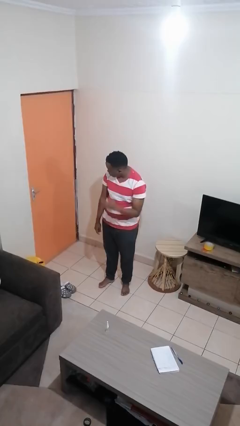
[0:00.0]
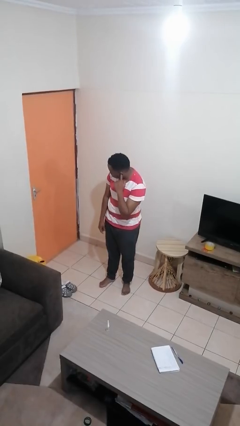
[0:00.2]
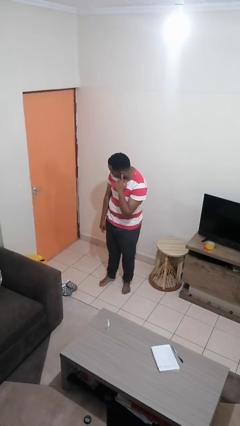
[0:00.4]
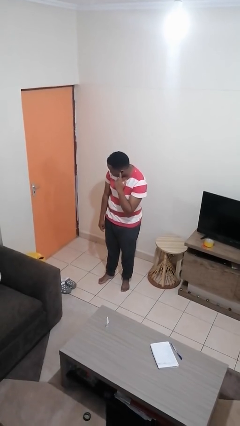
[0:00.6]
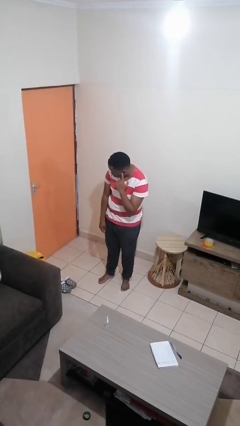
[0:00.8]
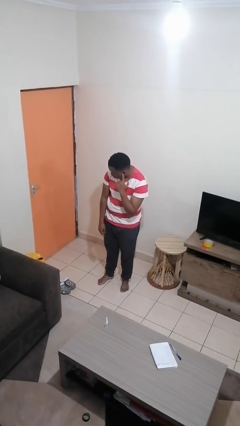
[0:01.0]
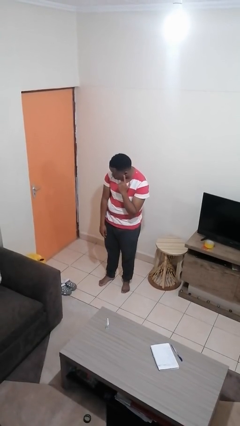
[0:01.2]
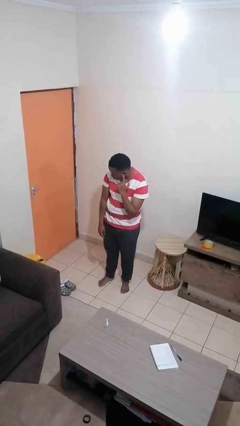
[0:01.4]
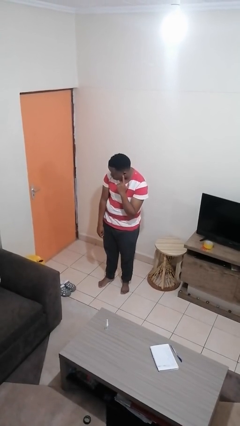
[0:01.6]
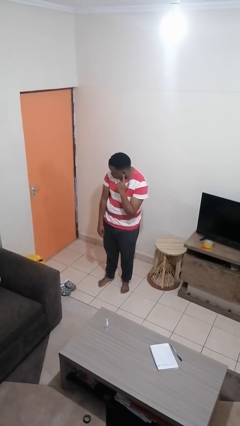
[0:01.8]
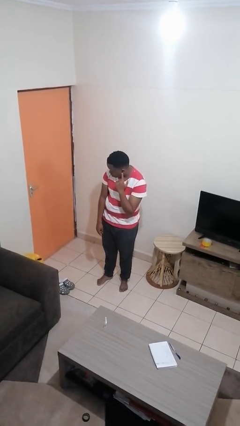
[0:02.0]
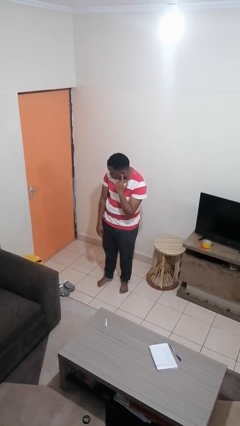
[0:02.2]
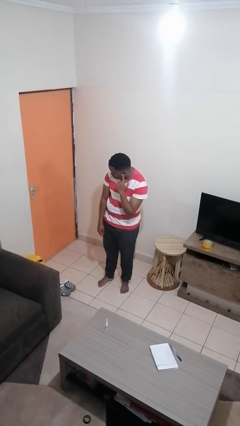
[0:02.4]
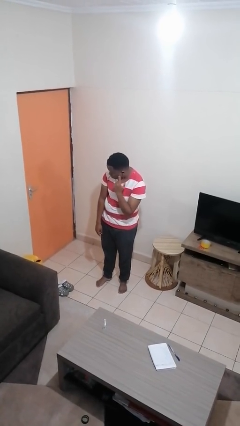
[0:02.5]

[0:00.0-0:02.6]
person gestures listen closely

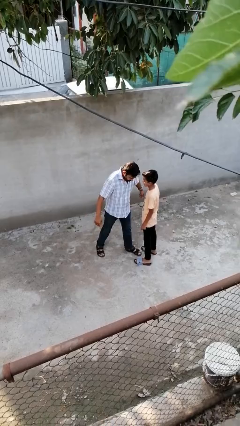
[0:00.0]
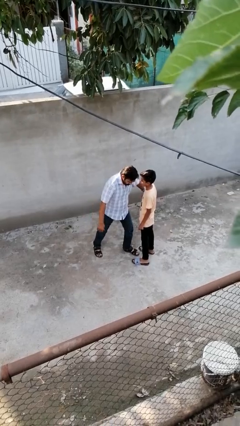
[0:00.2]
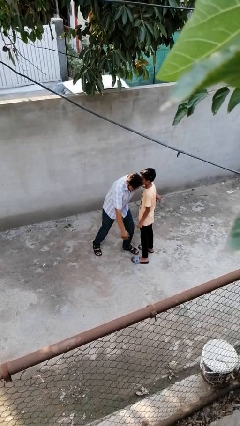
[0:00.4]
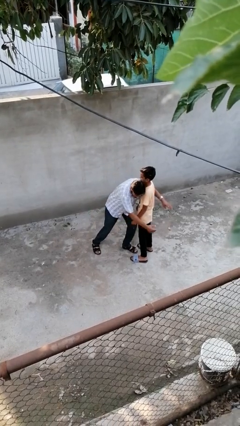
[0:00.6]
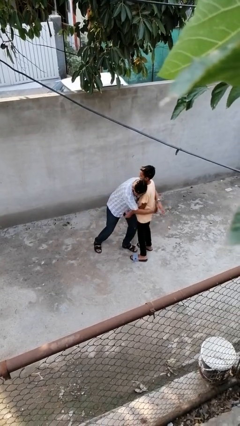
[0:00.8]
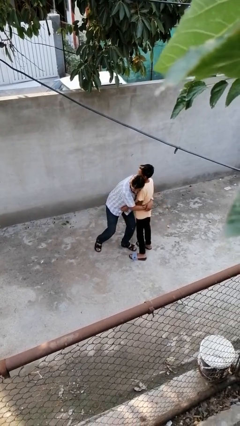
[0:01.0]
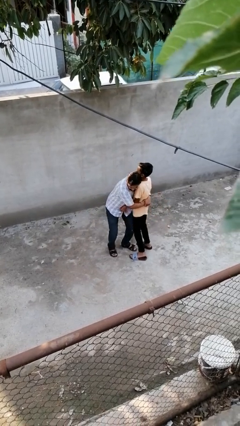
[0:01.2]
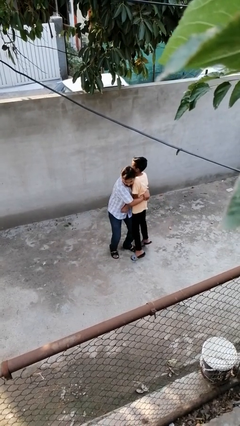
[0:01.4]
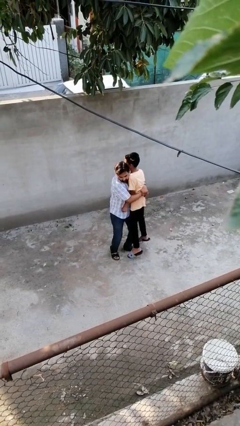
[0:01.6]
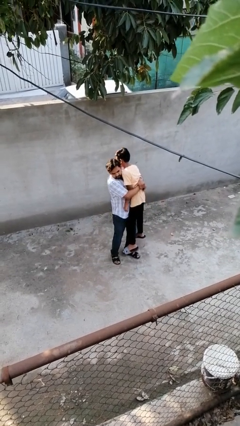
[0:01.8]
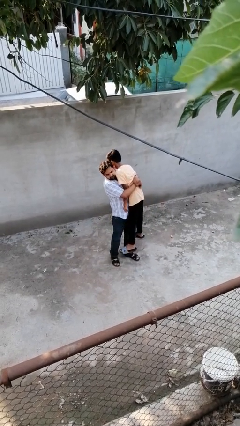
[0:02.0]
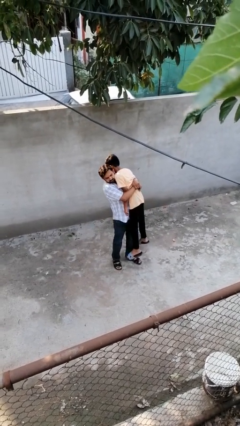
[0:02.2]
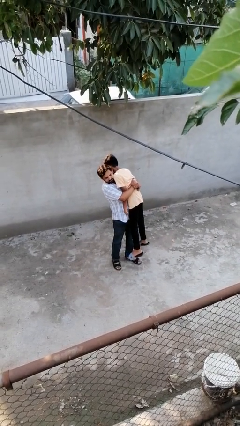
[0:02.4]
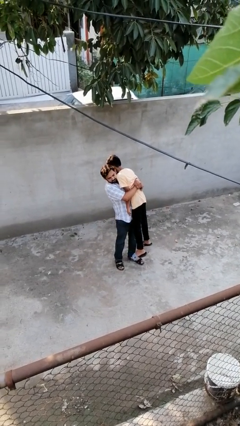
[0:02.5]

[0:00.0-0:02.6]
person picks up person

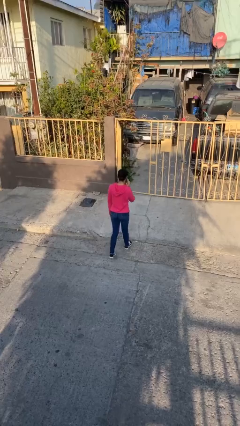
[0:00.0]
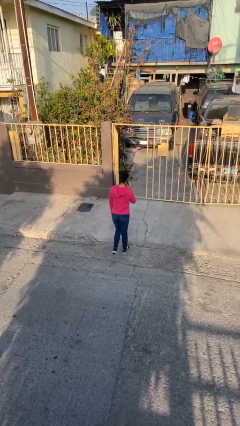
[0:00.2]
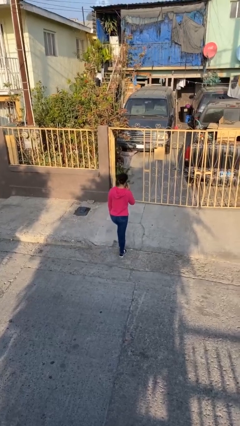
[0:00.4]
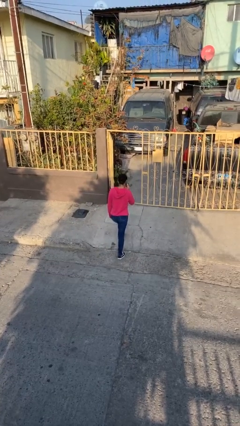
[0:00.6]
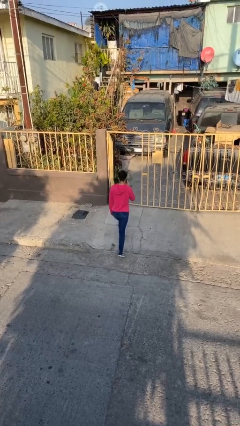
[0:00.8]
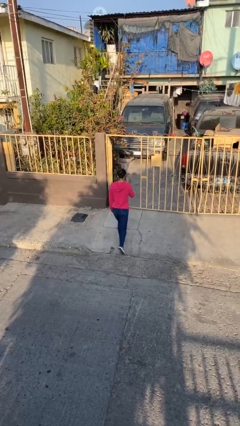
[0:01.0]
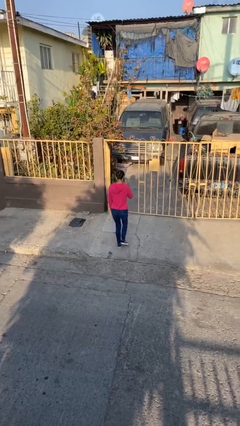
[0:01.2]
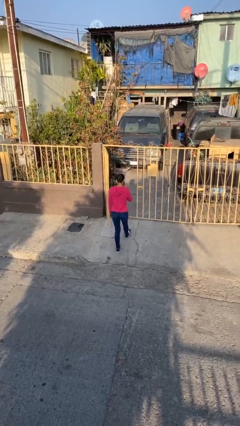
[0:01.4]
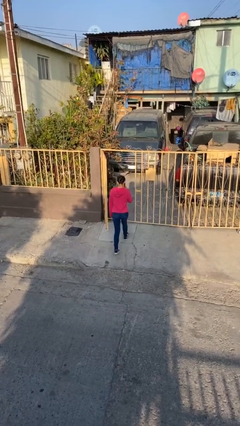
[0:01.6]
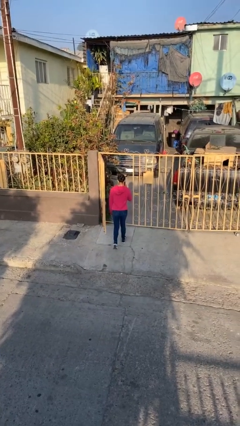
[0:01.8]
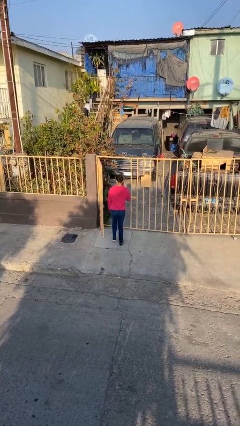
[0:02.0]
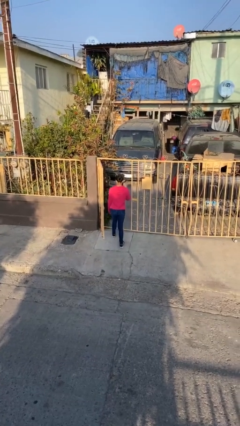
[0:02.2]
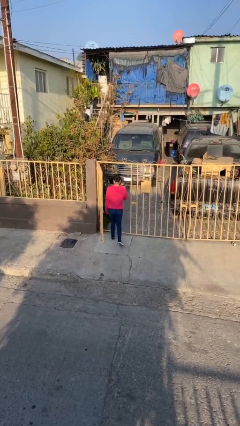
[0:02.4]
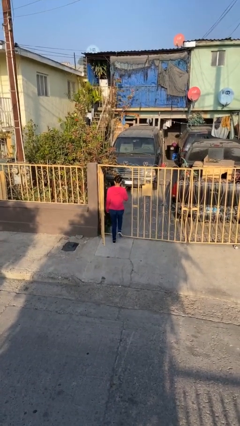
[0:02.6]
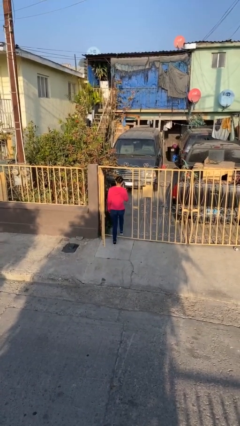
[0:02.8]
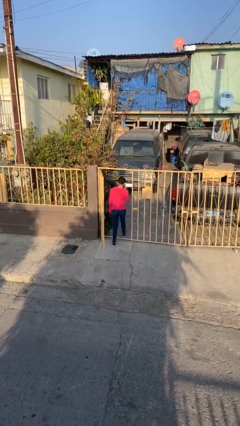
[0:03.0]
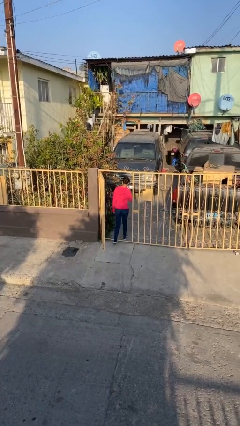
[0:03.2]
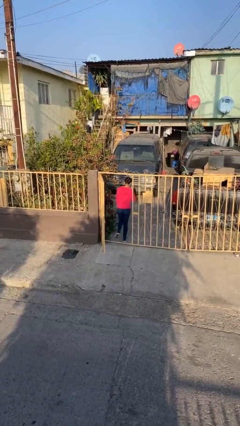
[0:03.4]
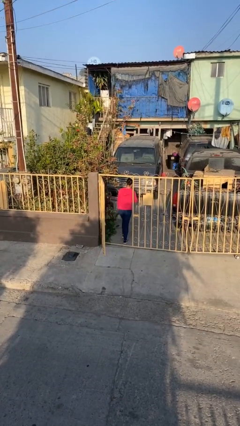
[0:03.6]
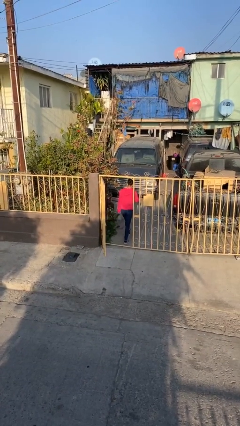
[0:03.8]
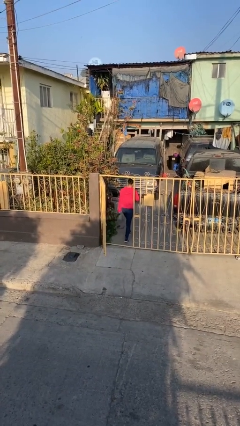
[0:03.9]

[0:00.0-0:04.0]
person exits scene through structure

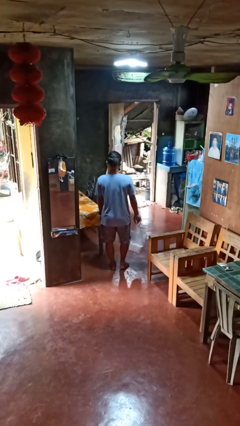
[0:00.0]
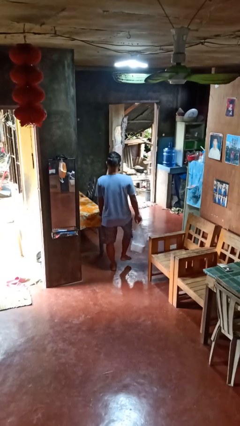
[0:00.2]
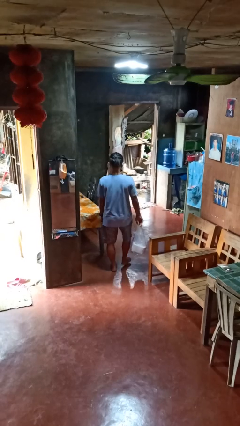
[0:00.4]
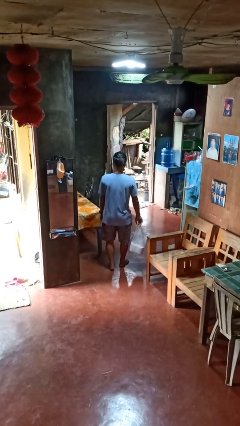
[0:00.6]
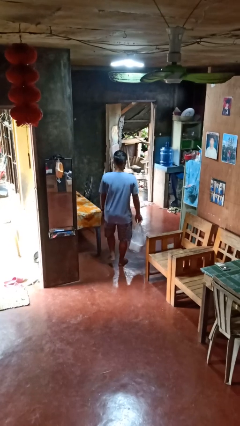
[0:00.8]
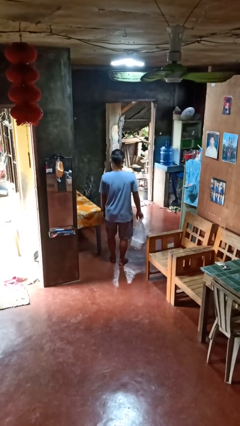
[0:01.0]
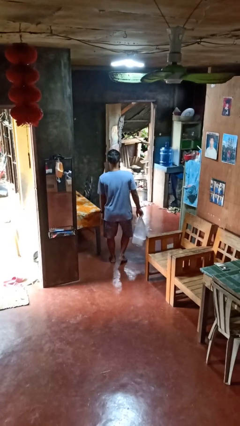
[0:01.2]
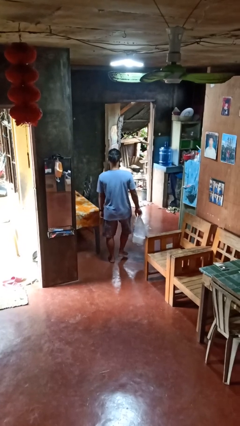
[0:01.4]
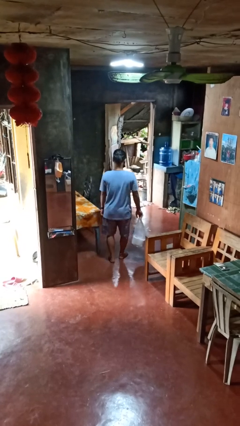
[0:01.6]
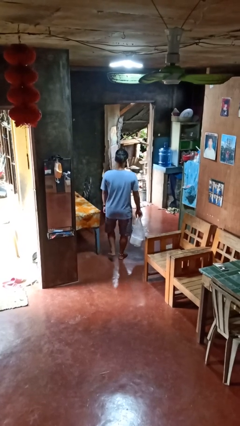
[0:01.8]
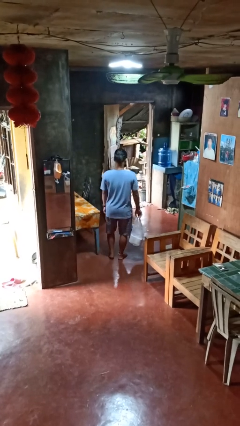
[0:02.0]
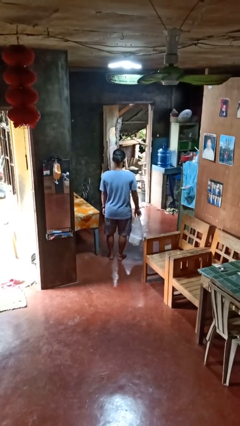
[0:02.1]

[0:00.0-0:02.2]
person carries groceries

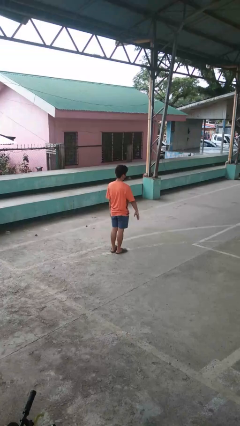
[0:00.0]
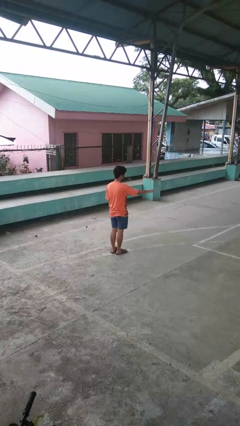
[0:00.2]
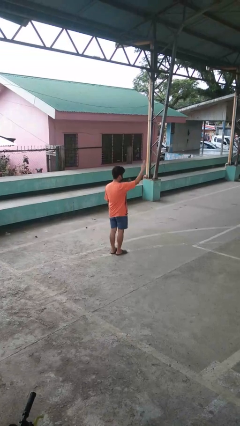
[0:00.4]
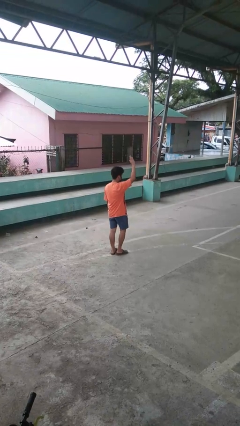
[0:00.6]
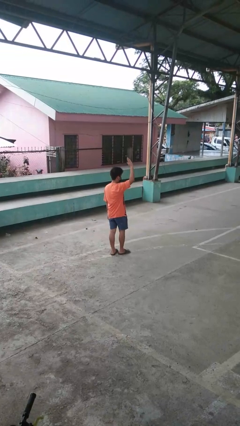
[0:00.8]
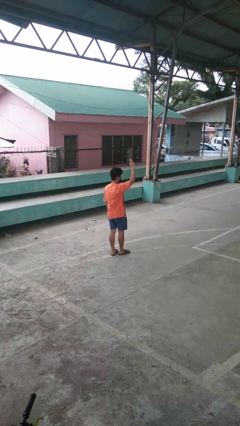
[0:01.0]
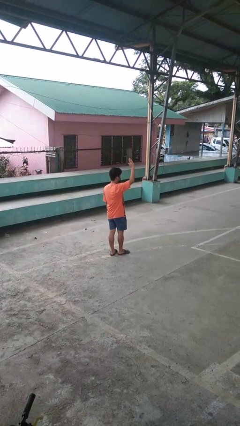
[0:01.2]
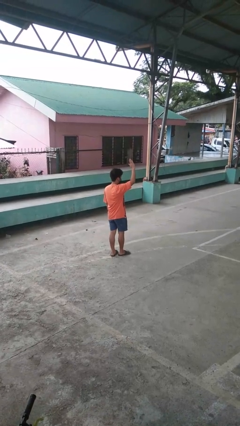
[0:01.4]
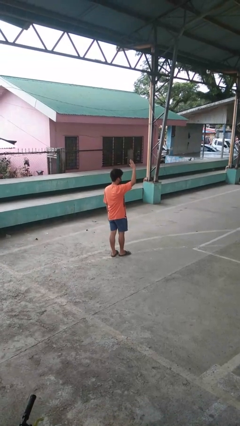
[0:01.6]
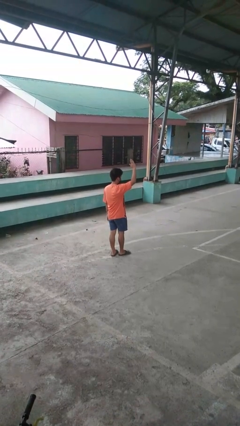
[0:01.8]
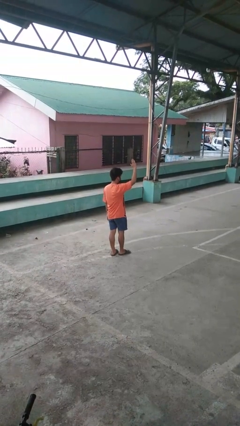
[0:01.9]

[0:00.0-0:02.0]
person gestures raise hand

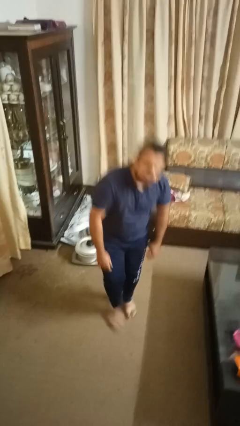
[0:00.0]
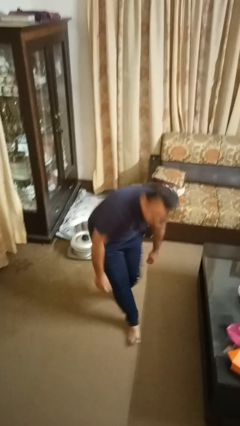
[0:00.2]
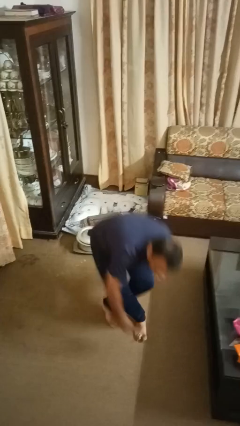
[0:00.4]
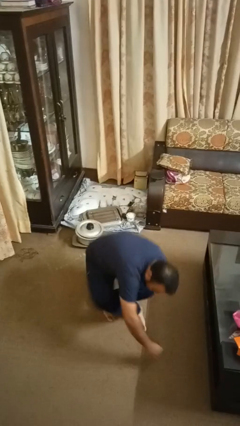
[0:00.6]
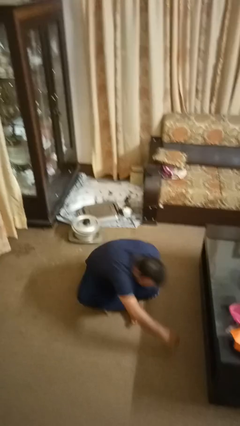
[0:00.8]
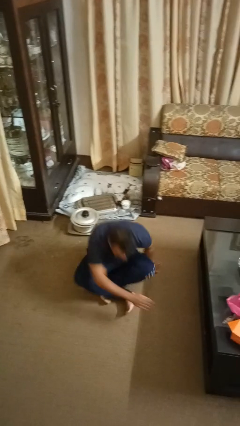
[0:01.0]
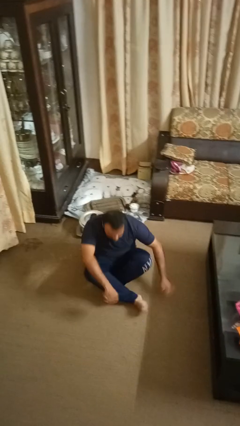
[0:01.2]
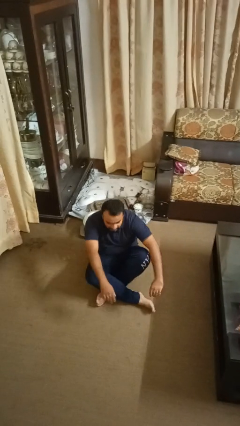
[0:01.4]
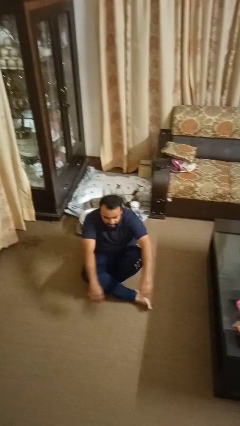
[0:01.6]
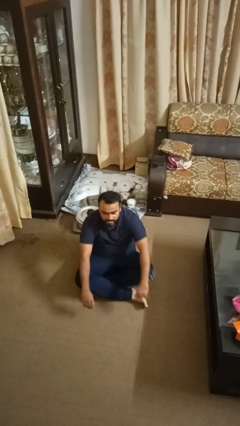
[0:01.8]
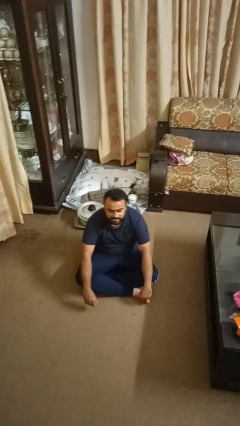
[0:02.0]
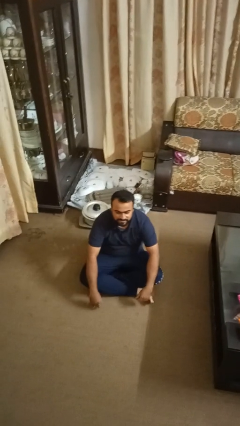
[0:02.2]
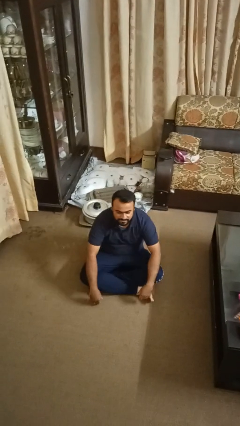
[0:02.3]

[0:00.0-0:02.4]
person sits crisscross

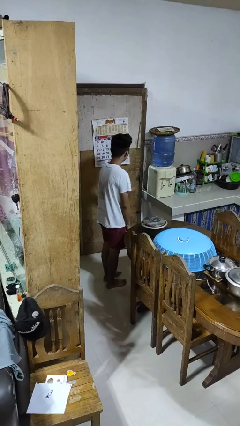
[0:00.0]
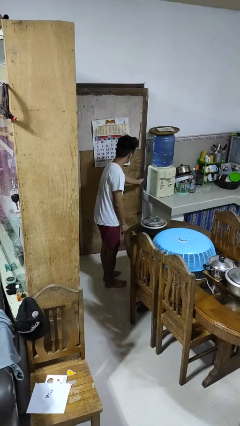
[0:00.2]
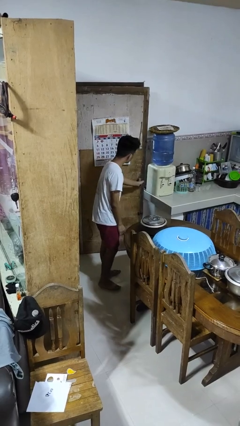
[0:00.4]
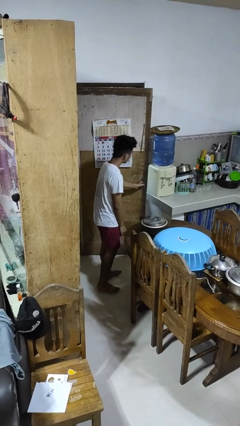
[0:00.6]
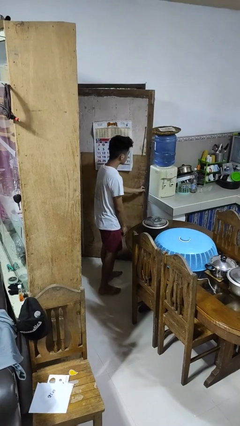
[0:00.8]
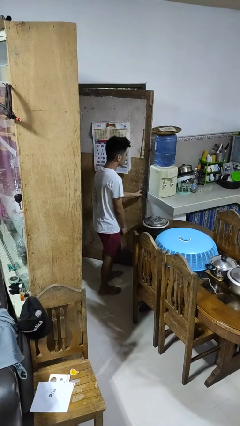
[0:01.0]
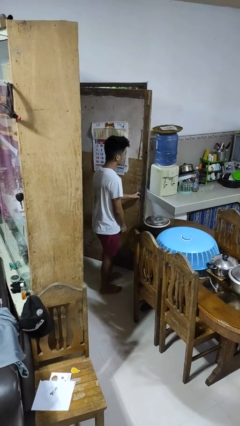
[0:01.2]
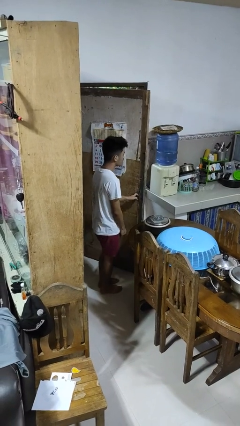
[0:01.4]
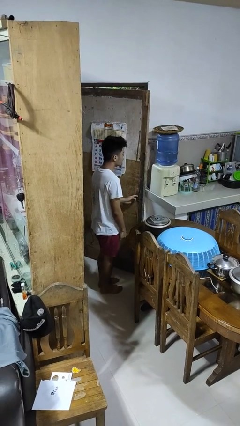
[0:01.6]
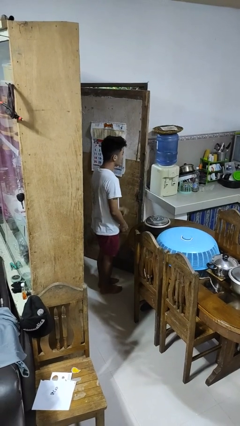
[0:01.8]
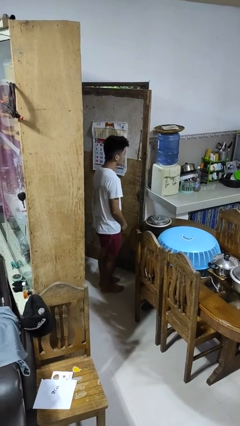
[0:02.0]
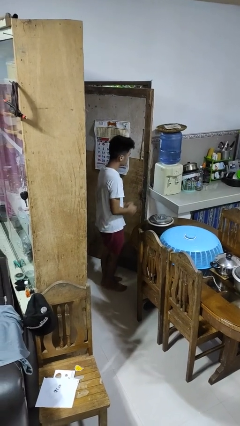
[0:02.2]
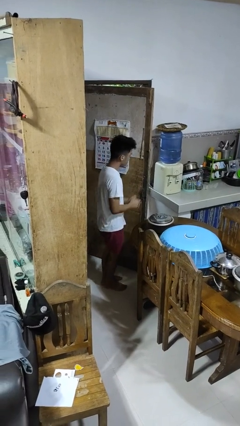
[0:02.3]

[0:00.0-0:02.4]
person opens facility door
